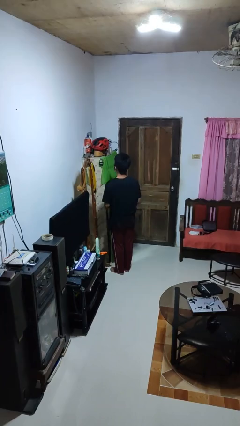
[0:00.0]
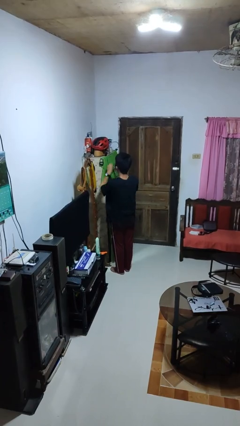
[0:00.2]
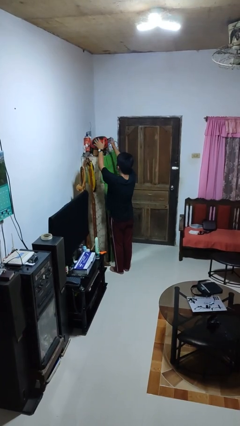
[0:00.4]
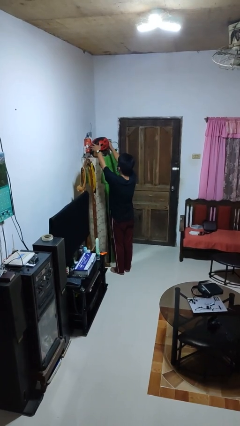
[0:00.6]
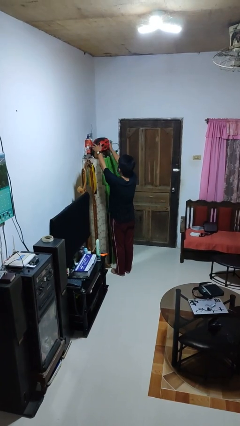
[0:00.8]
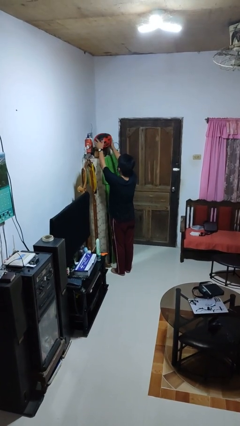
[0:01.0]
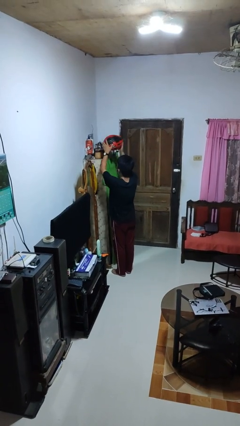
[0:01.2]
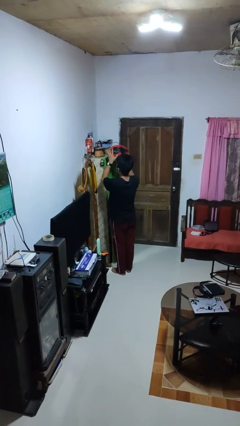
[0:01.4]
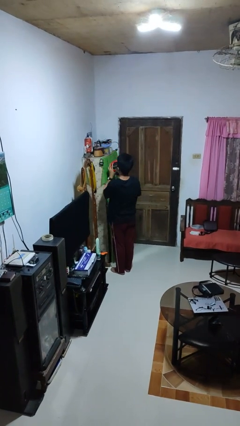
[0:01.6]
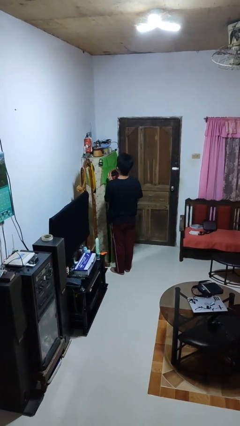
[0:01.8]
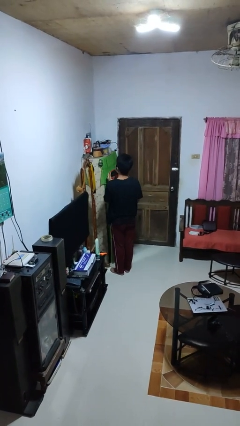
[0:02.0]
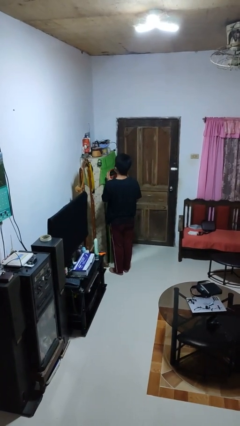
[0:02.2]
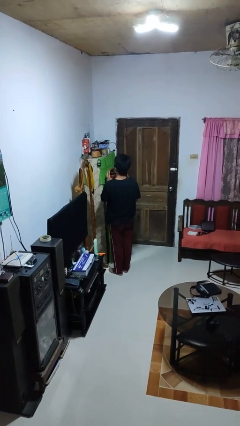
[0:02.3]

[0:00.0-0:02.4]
person picks up object from shelf

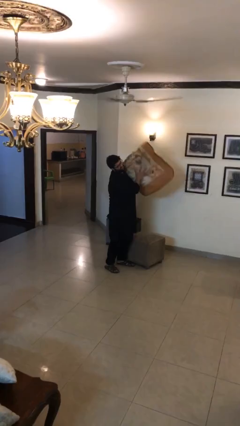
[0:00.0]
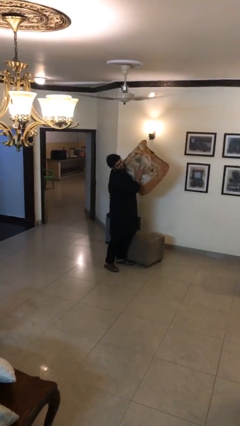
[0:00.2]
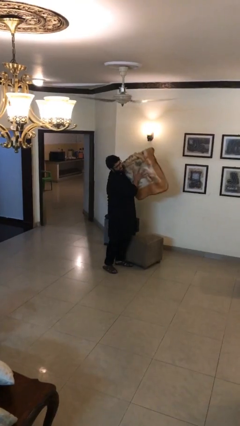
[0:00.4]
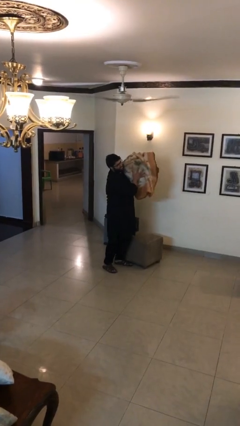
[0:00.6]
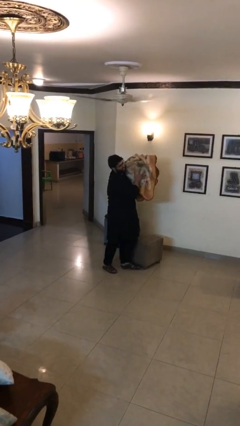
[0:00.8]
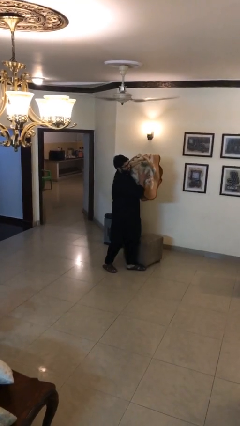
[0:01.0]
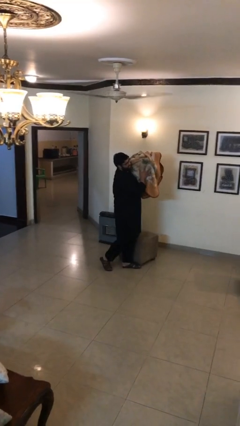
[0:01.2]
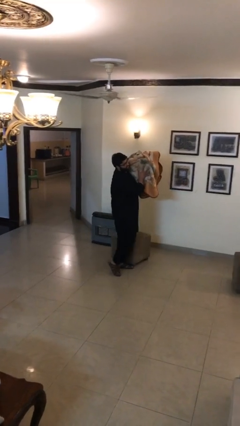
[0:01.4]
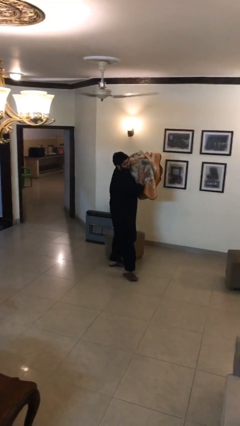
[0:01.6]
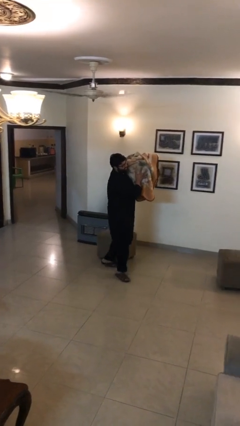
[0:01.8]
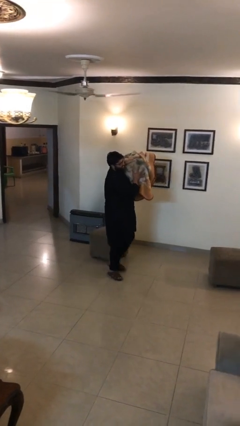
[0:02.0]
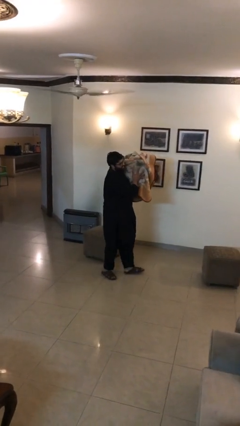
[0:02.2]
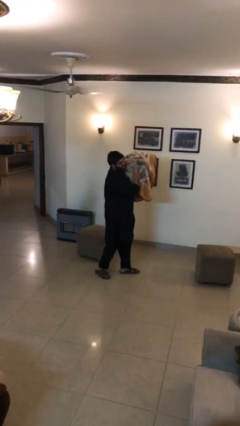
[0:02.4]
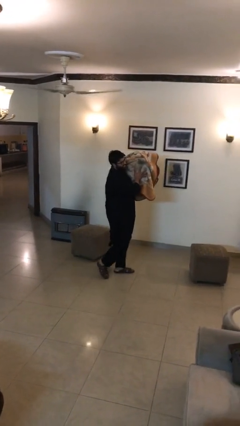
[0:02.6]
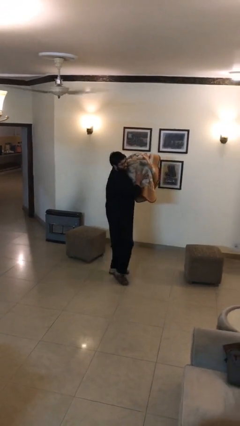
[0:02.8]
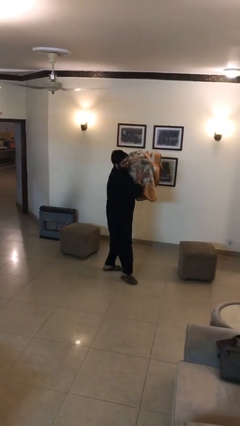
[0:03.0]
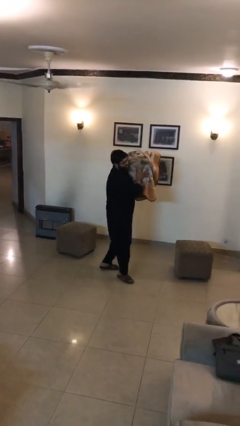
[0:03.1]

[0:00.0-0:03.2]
person carries heavy object

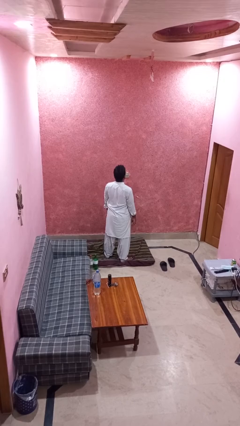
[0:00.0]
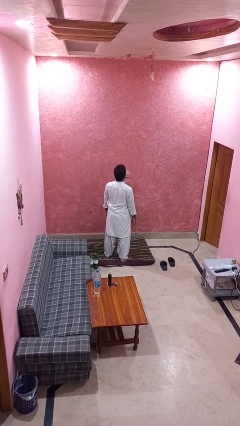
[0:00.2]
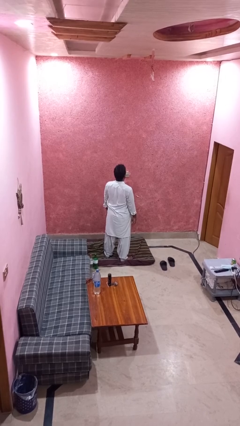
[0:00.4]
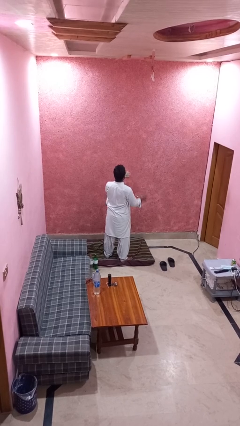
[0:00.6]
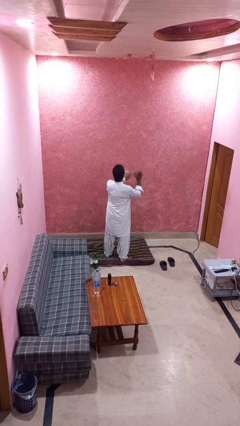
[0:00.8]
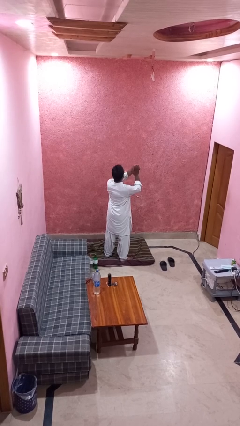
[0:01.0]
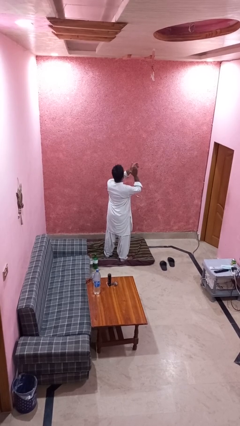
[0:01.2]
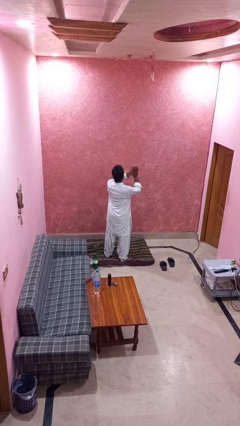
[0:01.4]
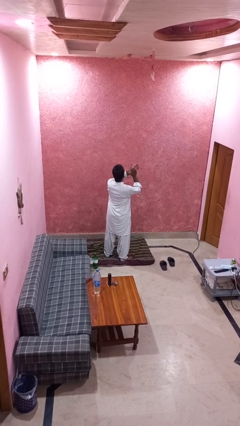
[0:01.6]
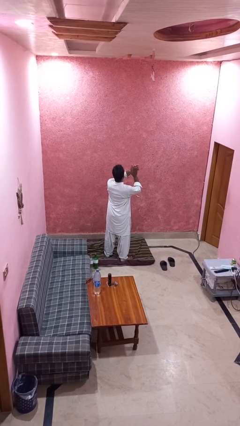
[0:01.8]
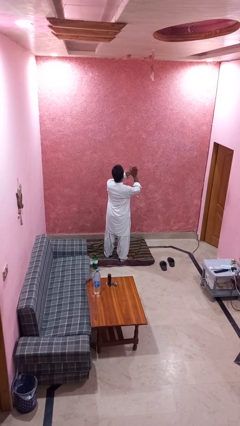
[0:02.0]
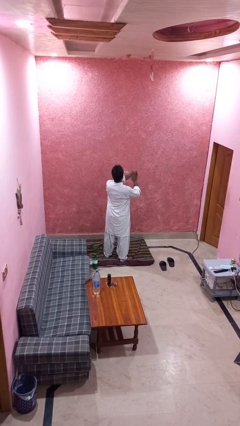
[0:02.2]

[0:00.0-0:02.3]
person claps hands

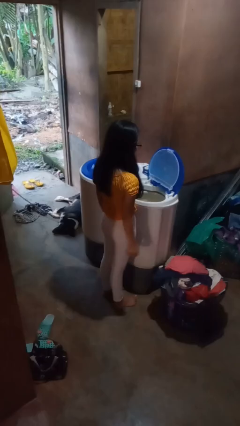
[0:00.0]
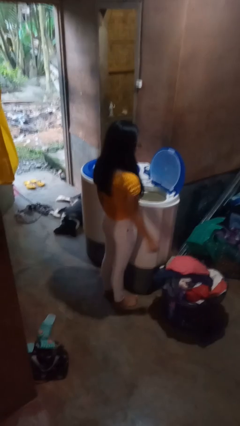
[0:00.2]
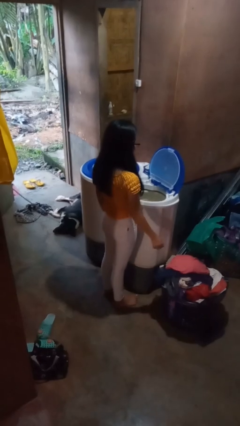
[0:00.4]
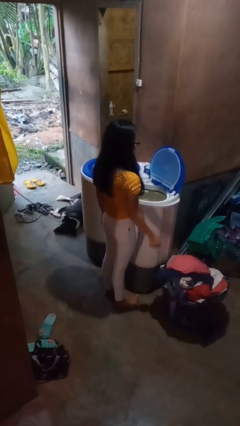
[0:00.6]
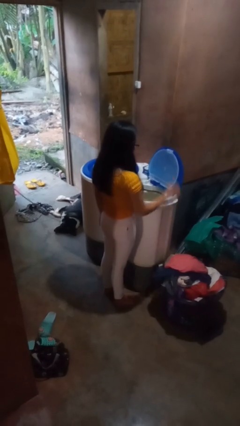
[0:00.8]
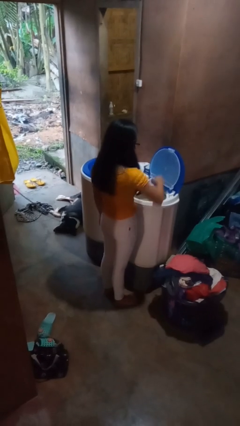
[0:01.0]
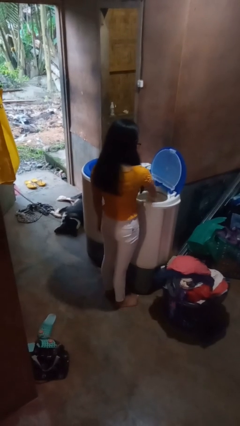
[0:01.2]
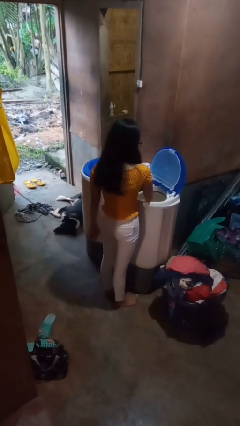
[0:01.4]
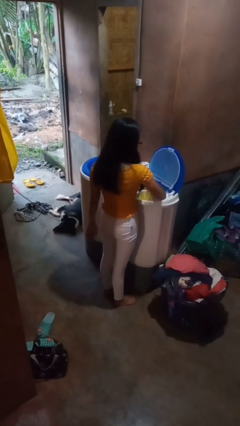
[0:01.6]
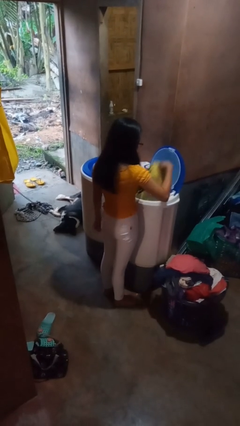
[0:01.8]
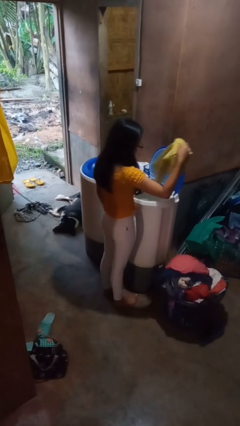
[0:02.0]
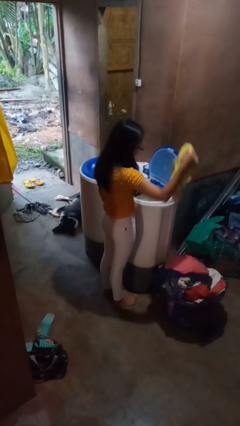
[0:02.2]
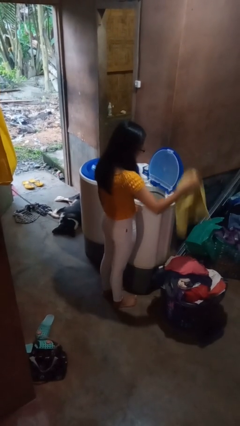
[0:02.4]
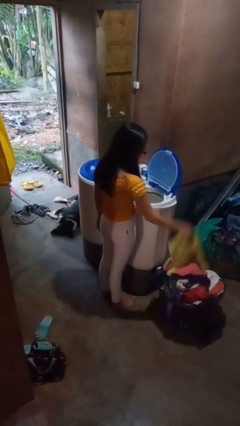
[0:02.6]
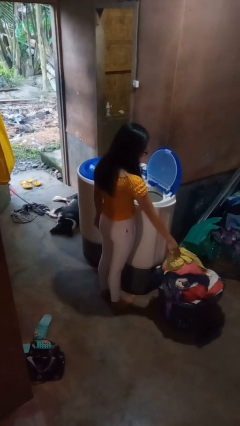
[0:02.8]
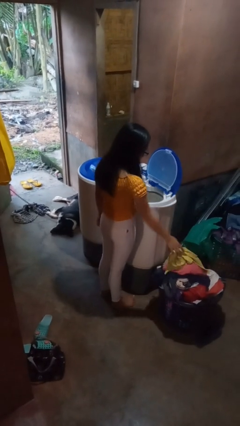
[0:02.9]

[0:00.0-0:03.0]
person unloads dryer

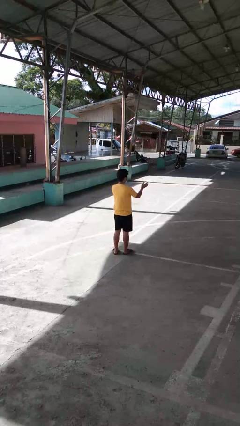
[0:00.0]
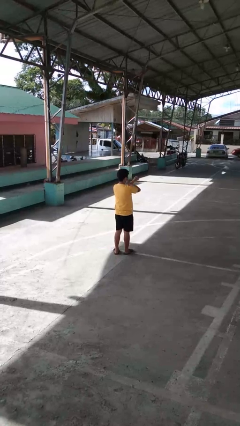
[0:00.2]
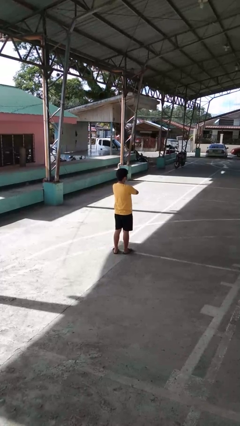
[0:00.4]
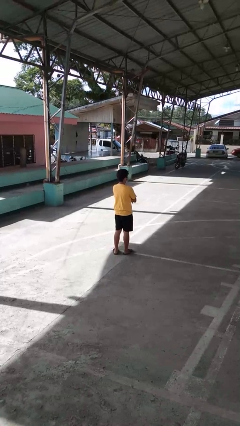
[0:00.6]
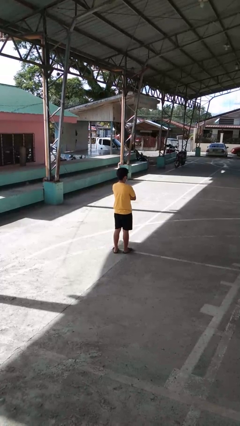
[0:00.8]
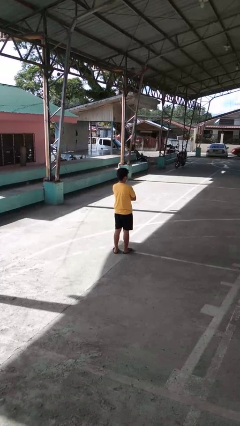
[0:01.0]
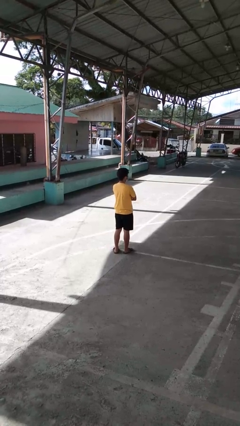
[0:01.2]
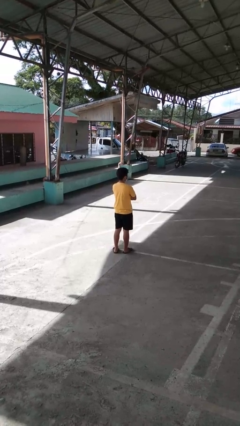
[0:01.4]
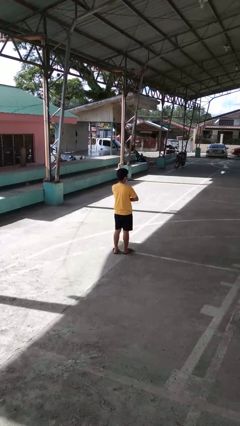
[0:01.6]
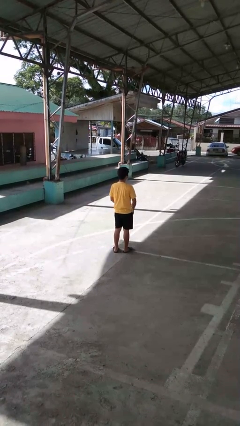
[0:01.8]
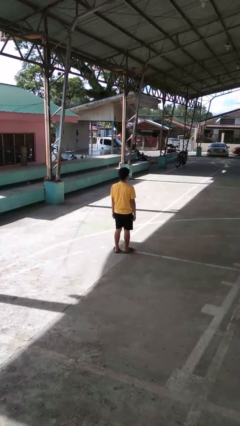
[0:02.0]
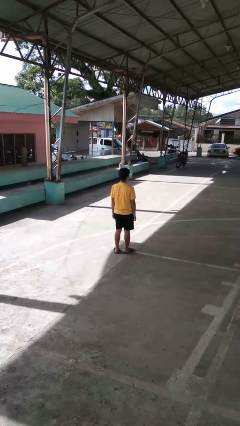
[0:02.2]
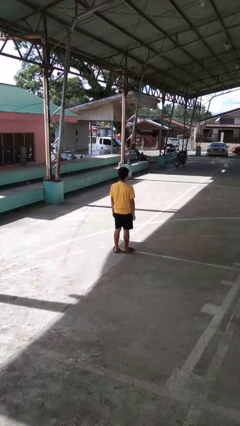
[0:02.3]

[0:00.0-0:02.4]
person crosses arms

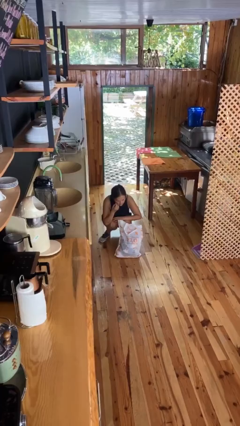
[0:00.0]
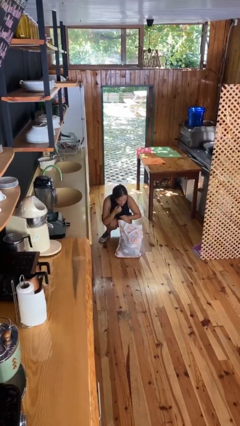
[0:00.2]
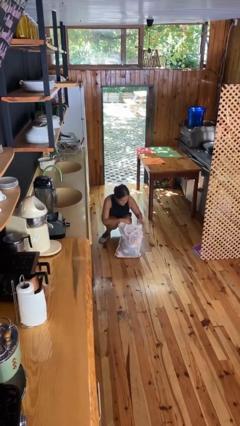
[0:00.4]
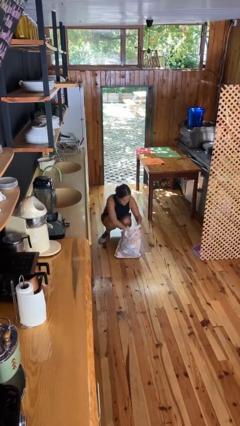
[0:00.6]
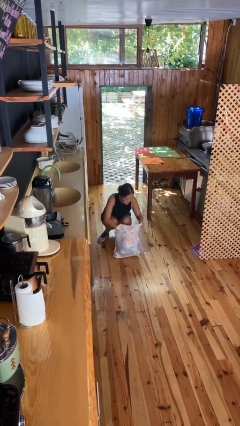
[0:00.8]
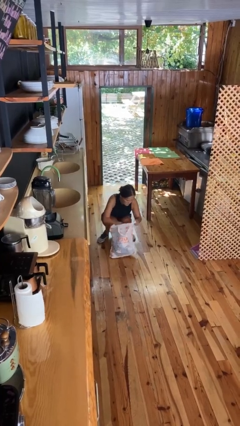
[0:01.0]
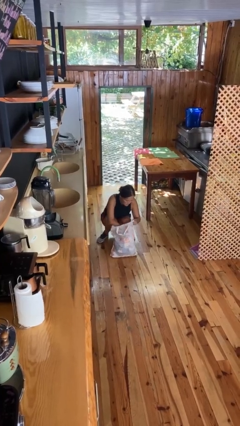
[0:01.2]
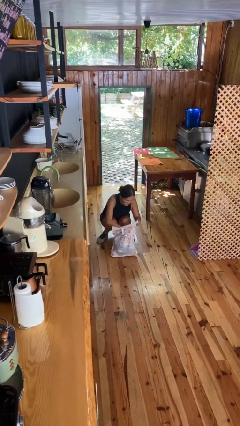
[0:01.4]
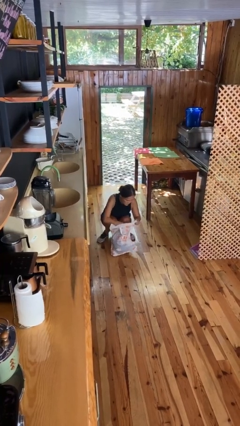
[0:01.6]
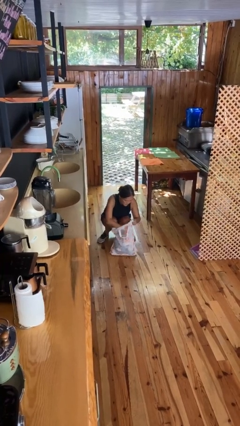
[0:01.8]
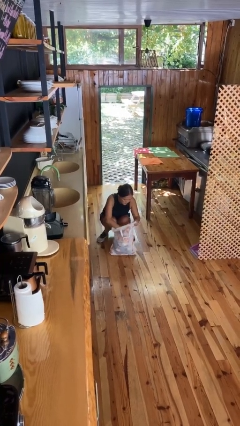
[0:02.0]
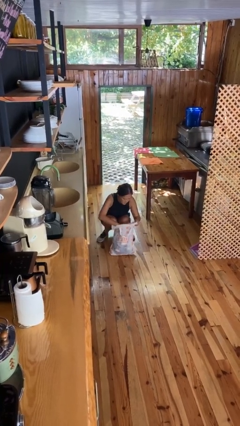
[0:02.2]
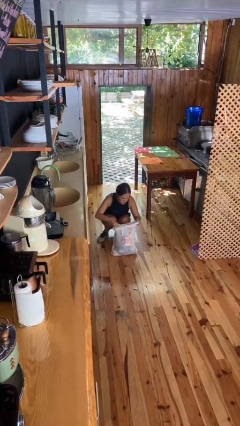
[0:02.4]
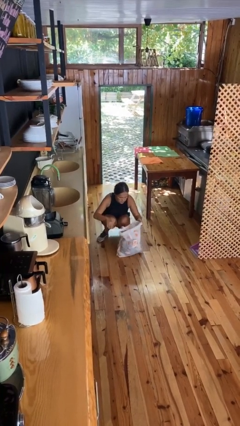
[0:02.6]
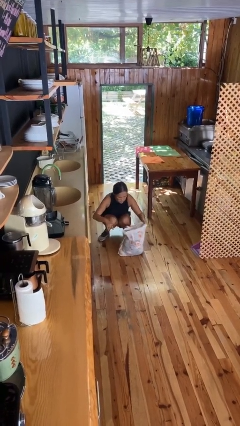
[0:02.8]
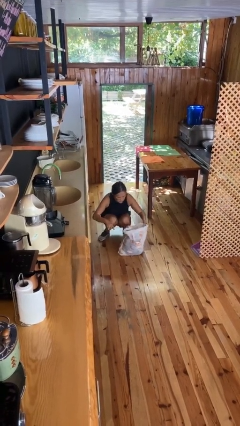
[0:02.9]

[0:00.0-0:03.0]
person searches in bag

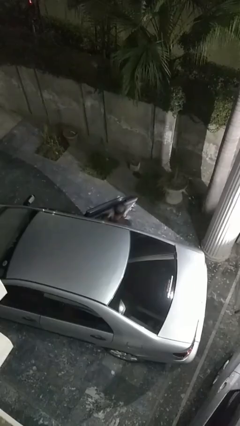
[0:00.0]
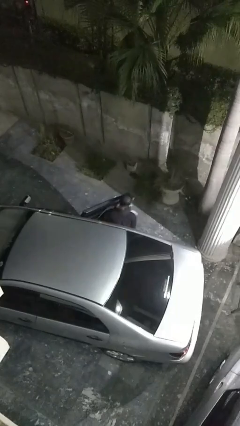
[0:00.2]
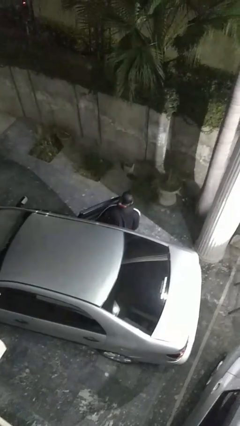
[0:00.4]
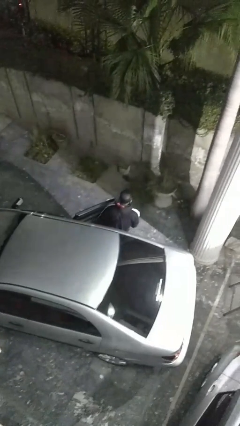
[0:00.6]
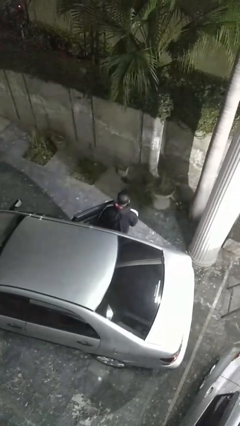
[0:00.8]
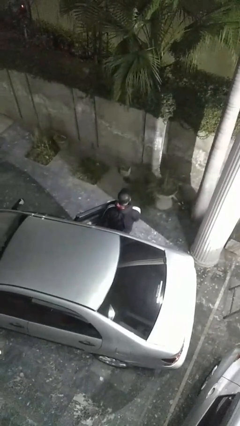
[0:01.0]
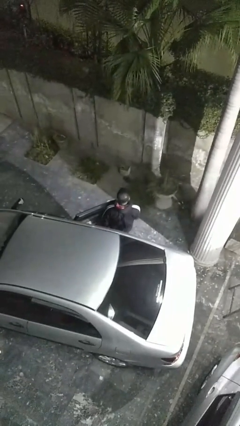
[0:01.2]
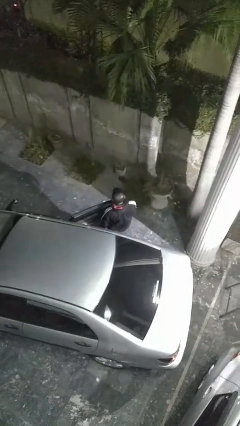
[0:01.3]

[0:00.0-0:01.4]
person exits car
